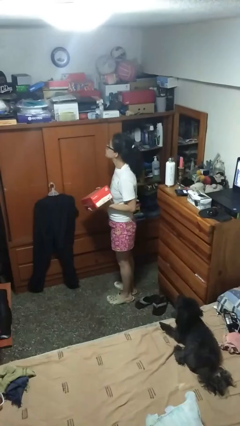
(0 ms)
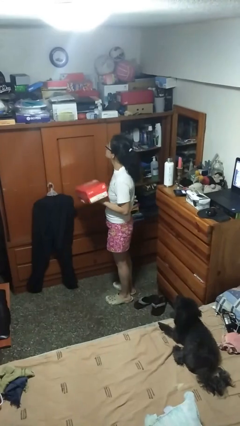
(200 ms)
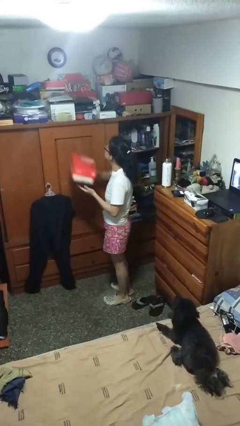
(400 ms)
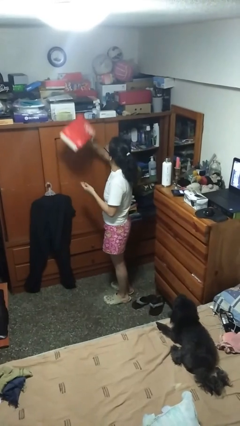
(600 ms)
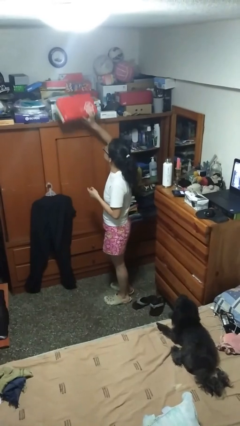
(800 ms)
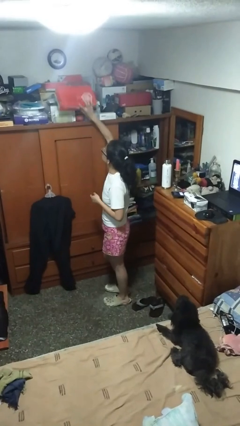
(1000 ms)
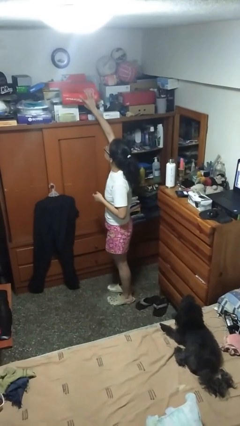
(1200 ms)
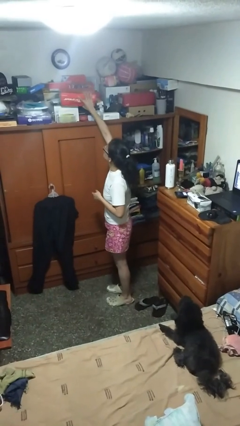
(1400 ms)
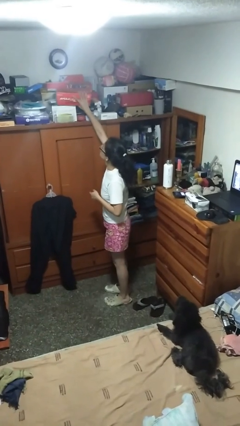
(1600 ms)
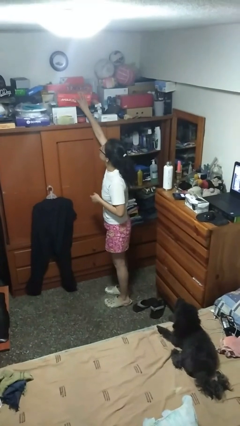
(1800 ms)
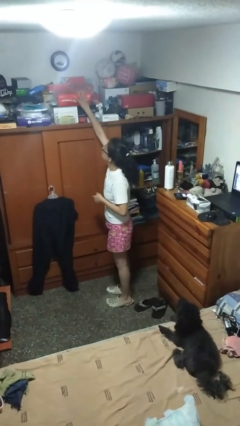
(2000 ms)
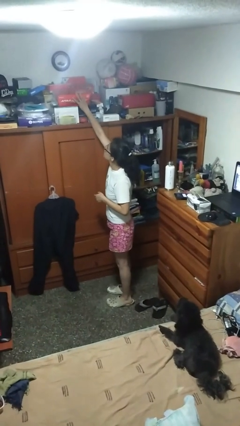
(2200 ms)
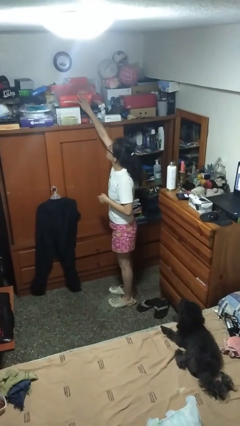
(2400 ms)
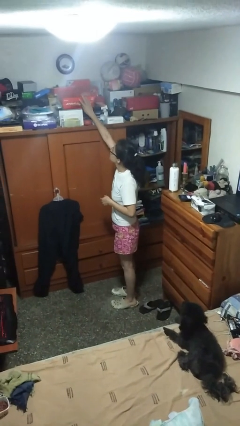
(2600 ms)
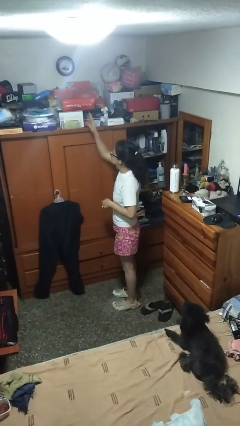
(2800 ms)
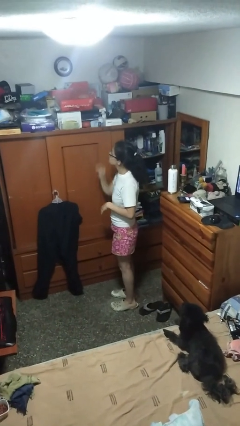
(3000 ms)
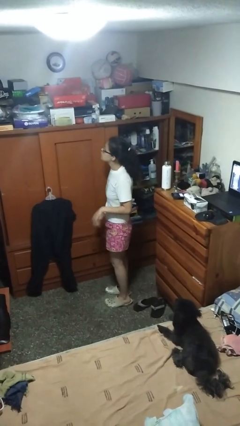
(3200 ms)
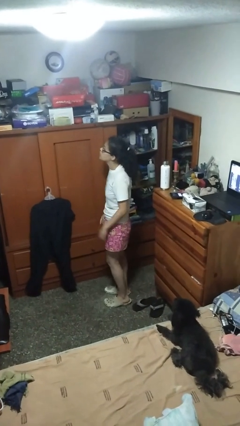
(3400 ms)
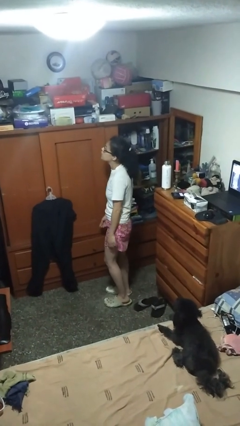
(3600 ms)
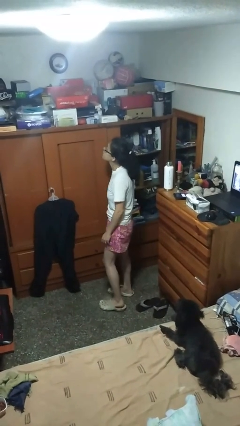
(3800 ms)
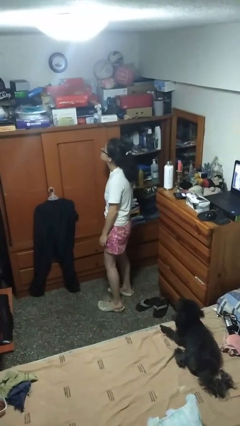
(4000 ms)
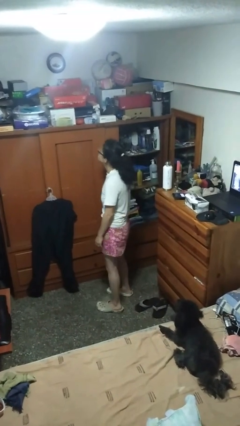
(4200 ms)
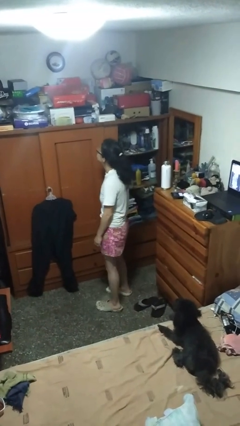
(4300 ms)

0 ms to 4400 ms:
person puts down object on shelf

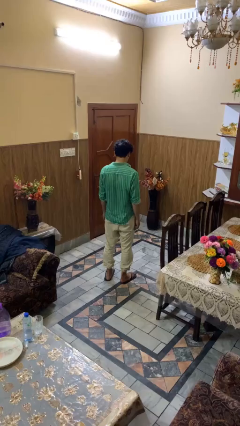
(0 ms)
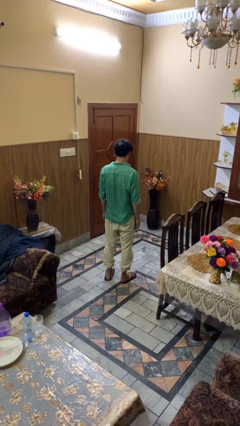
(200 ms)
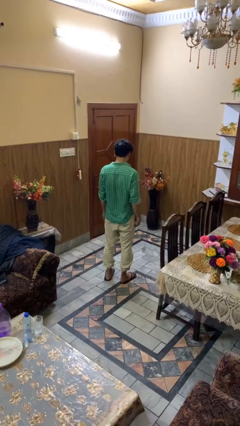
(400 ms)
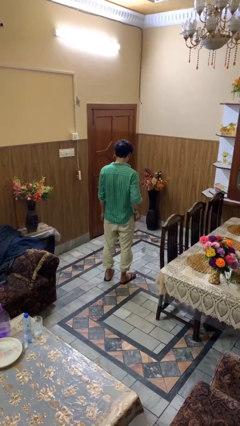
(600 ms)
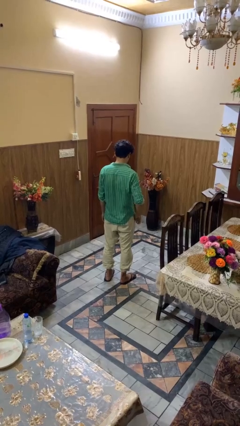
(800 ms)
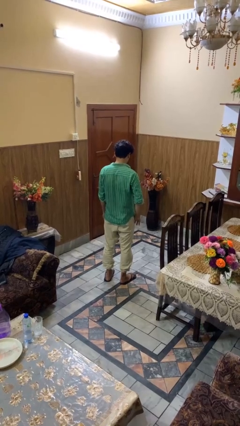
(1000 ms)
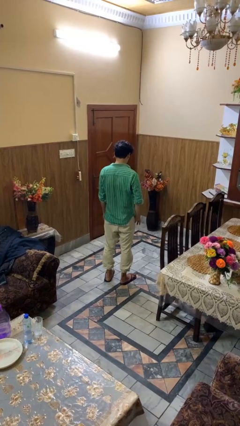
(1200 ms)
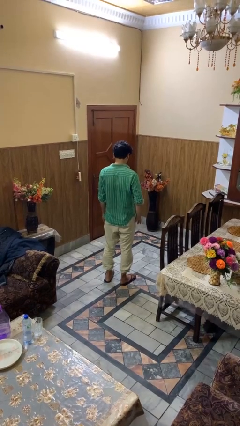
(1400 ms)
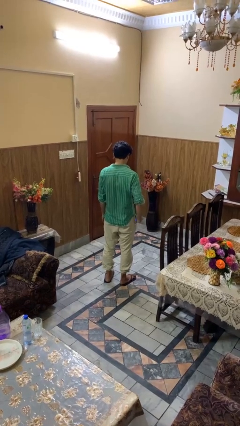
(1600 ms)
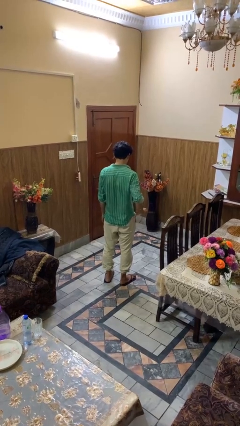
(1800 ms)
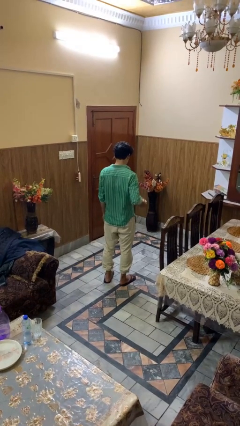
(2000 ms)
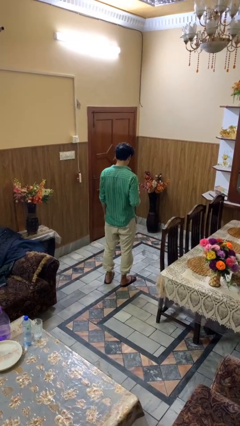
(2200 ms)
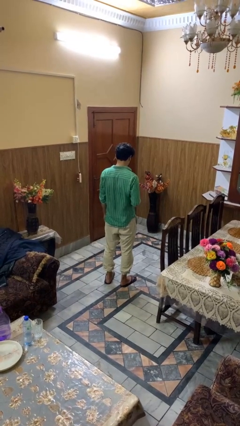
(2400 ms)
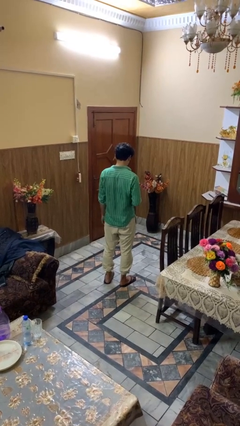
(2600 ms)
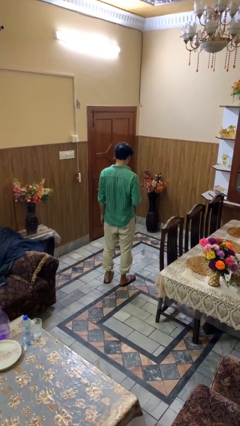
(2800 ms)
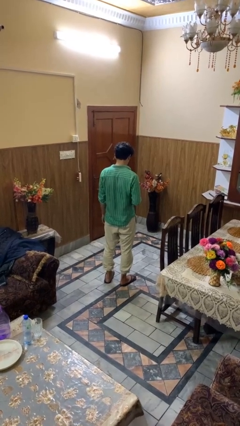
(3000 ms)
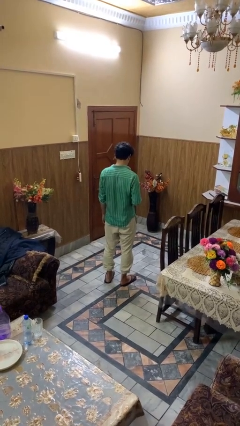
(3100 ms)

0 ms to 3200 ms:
person takes phone from pocket

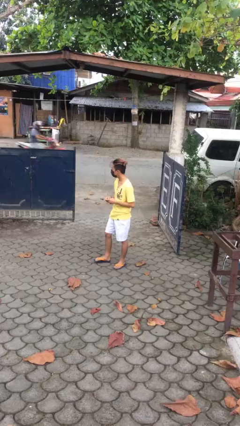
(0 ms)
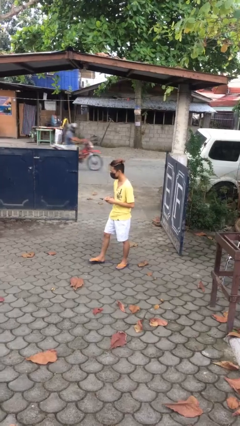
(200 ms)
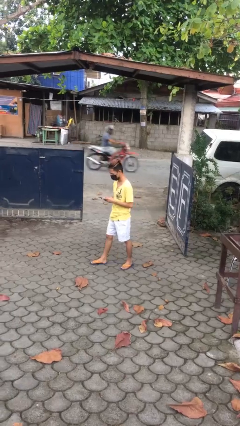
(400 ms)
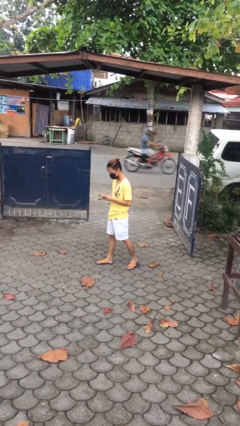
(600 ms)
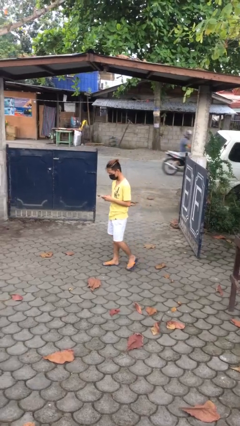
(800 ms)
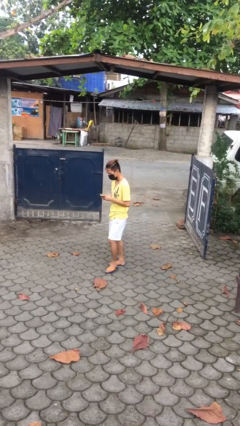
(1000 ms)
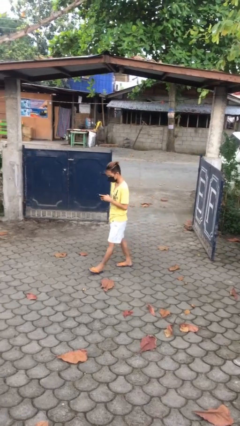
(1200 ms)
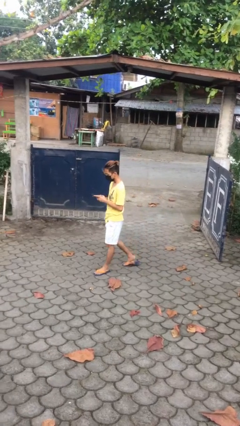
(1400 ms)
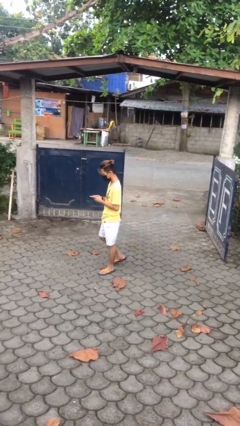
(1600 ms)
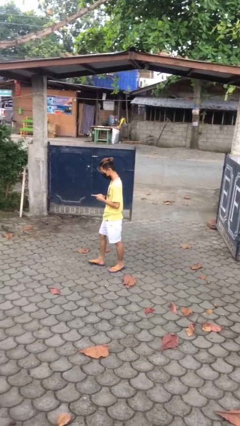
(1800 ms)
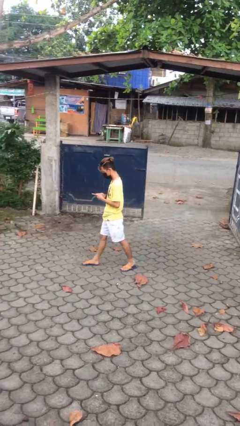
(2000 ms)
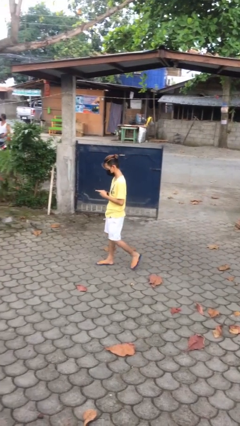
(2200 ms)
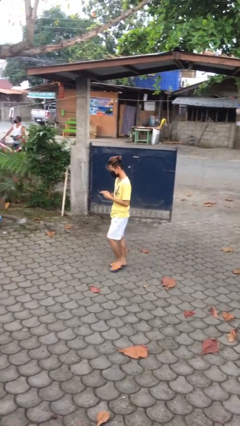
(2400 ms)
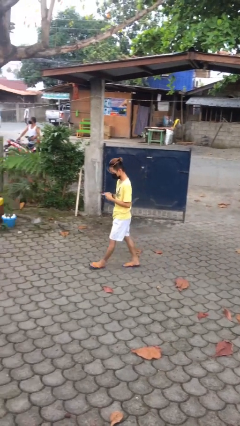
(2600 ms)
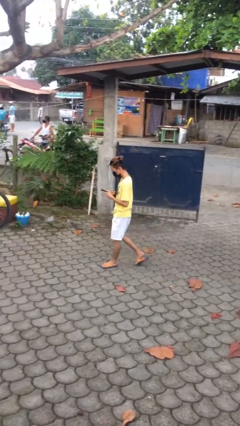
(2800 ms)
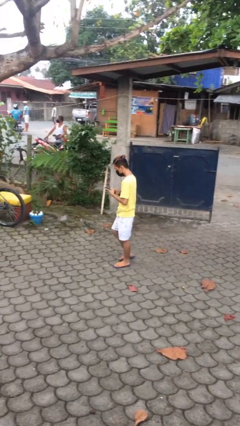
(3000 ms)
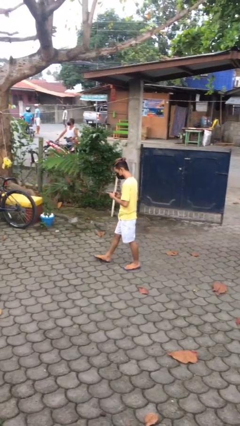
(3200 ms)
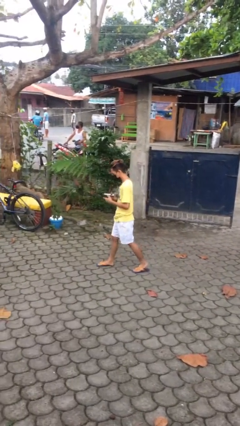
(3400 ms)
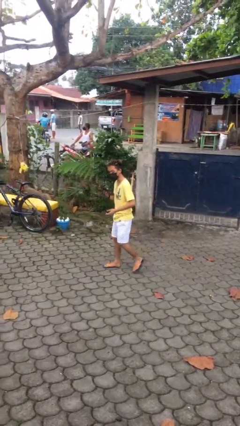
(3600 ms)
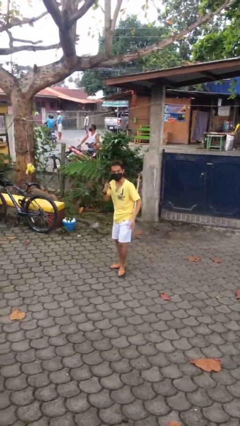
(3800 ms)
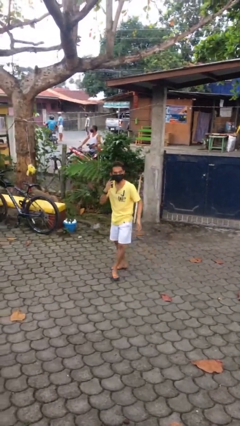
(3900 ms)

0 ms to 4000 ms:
person texts on phone

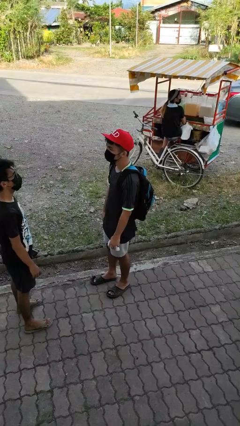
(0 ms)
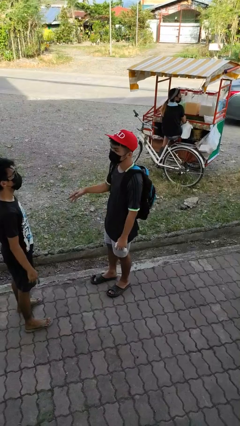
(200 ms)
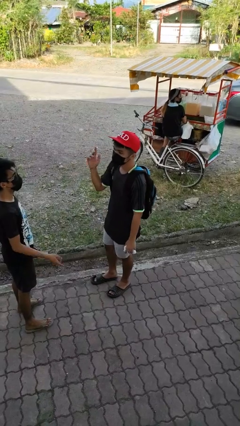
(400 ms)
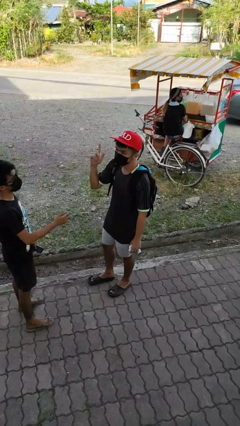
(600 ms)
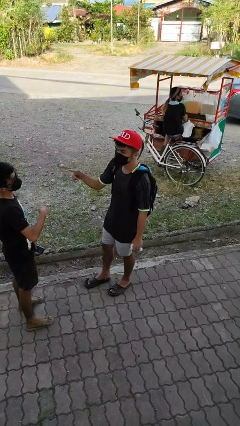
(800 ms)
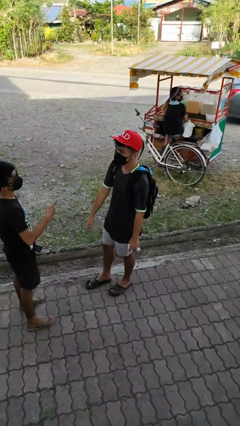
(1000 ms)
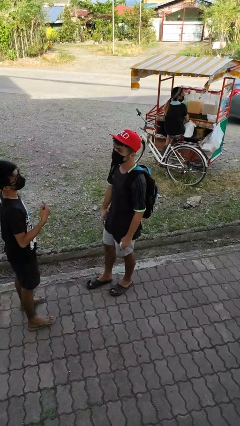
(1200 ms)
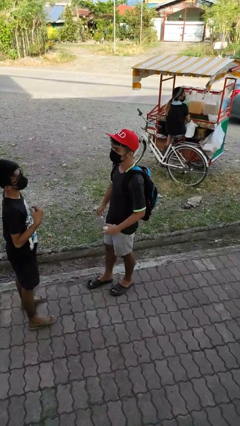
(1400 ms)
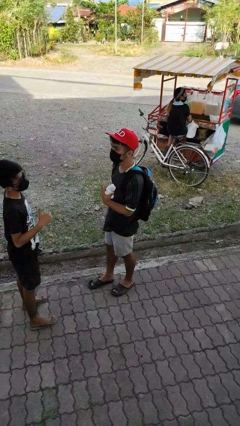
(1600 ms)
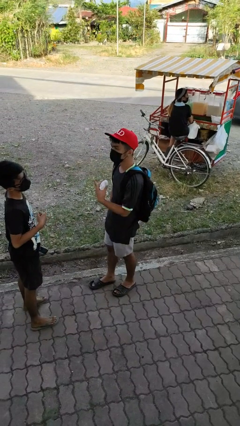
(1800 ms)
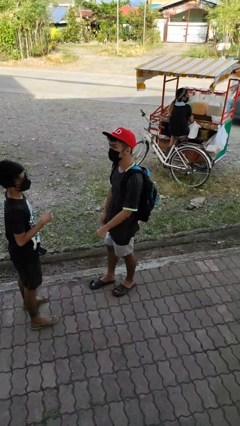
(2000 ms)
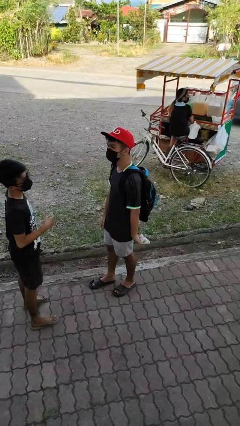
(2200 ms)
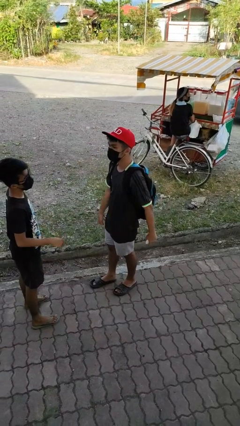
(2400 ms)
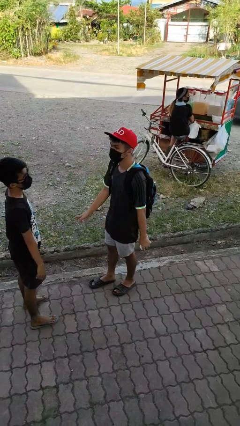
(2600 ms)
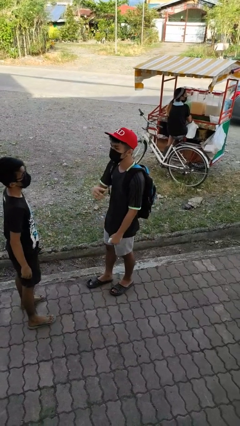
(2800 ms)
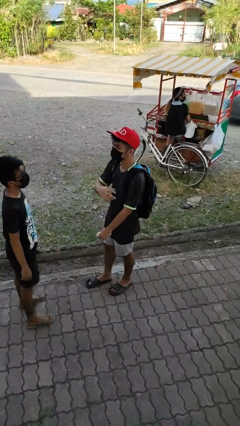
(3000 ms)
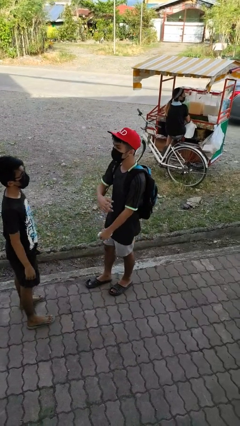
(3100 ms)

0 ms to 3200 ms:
person talks to person

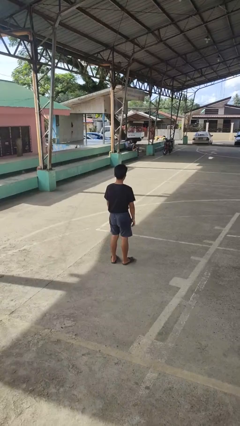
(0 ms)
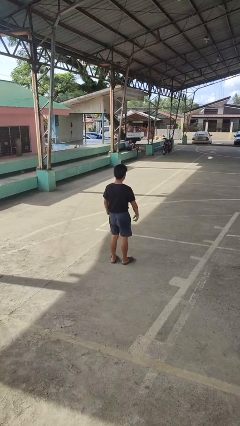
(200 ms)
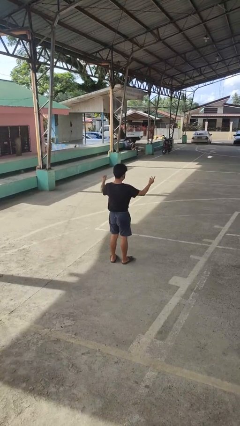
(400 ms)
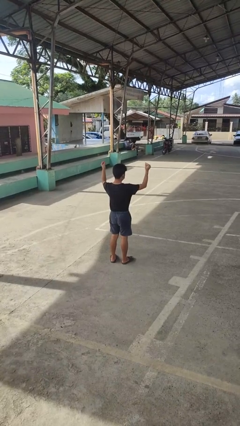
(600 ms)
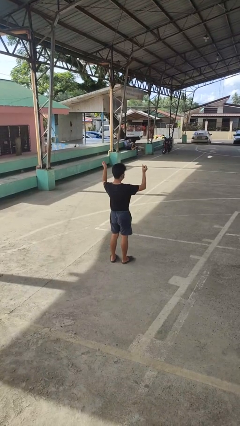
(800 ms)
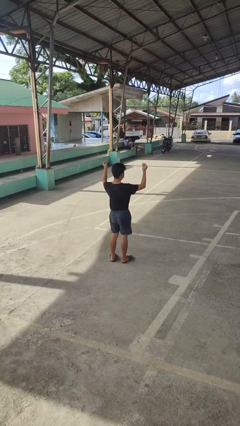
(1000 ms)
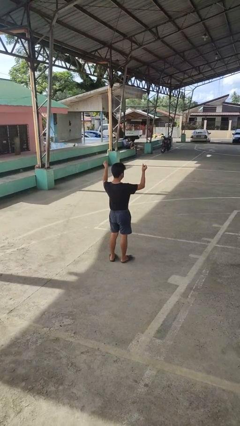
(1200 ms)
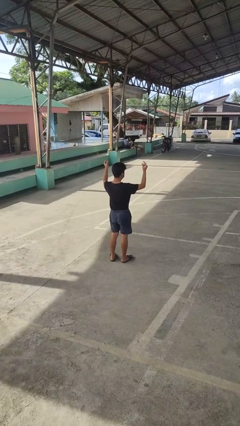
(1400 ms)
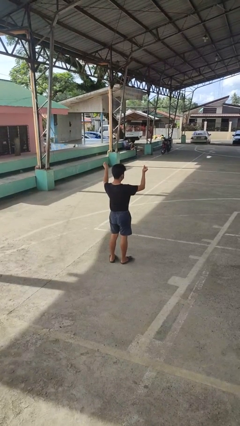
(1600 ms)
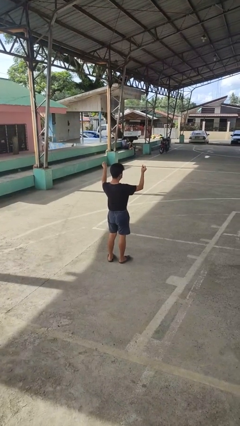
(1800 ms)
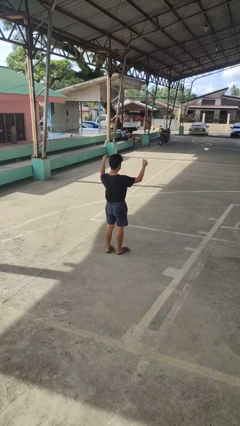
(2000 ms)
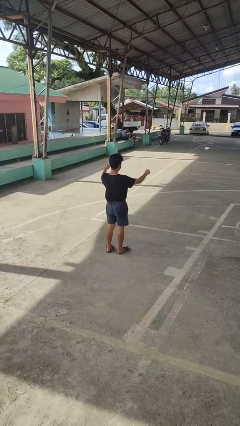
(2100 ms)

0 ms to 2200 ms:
person snaps fingers
